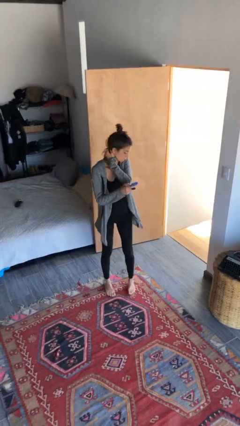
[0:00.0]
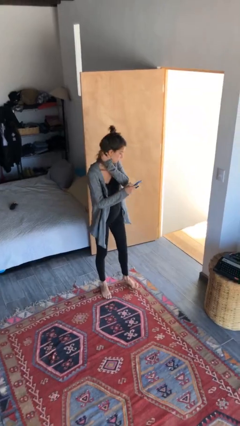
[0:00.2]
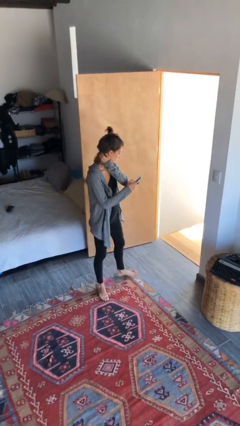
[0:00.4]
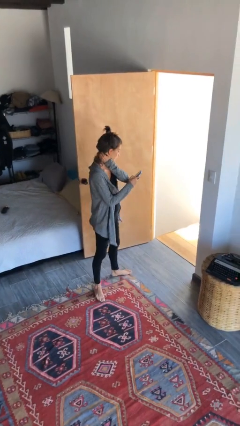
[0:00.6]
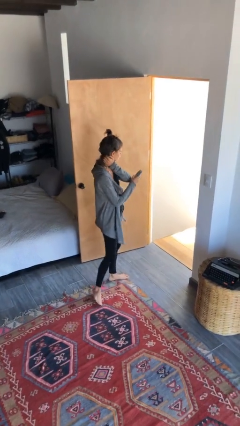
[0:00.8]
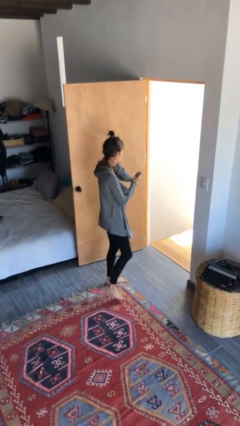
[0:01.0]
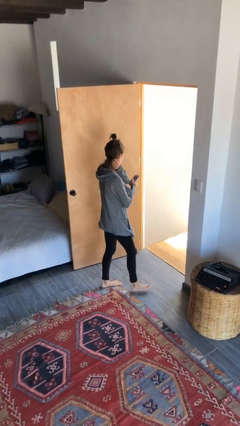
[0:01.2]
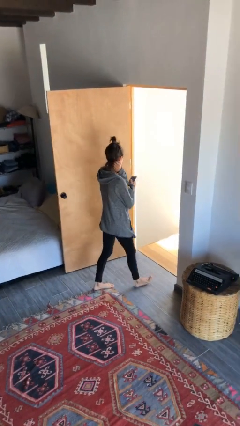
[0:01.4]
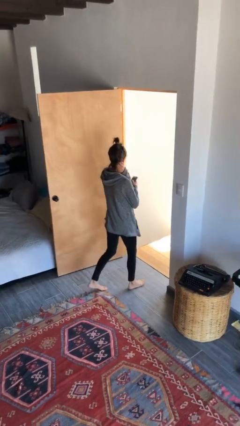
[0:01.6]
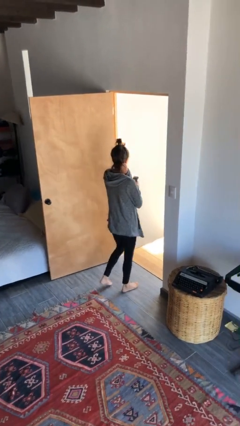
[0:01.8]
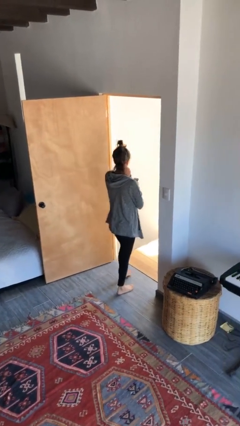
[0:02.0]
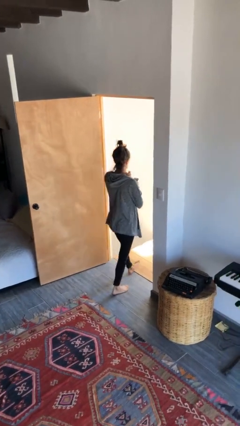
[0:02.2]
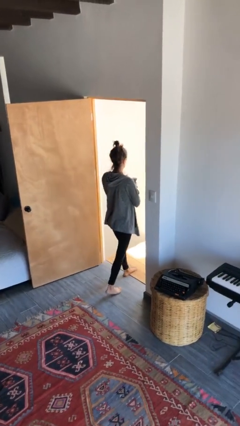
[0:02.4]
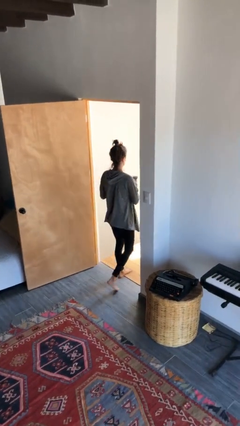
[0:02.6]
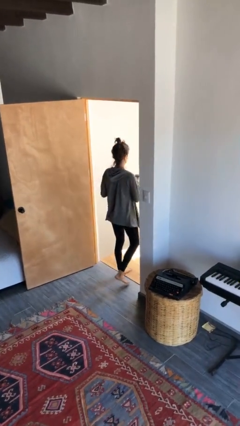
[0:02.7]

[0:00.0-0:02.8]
person exits scene through structure

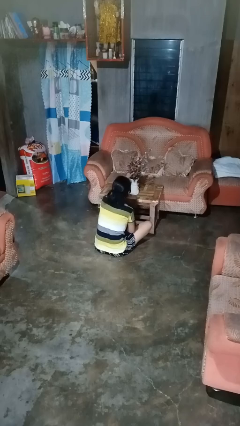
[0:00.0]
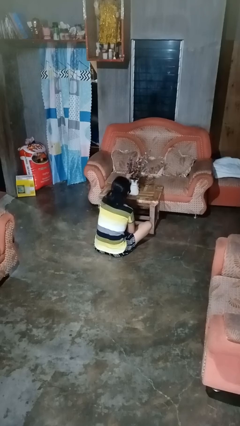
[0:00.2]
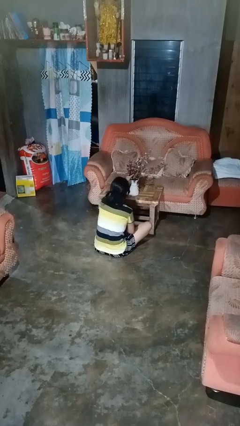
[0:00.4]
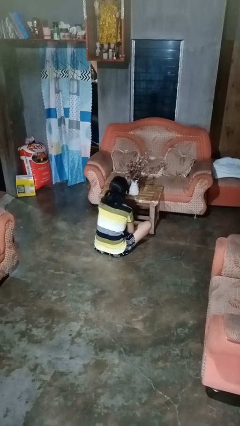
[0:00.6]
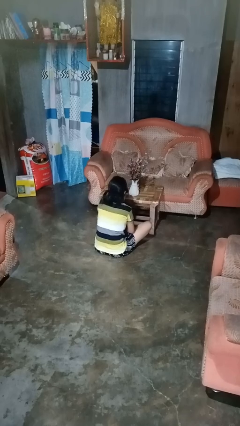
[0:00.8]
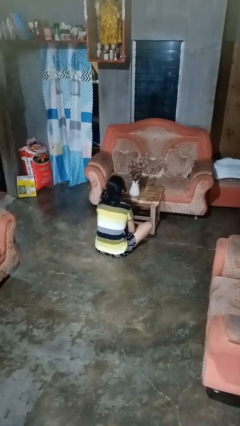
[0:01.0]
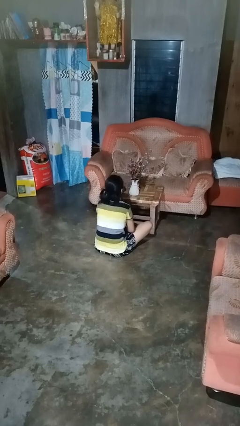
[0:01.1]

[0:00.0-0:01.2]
person arranges flowers in vase

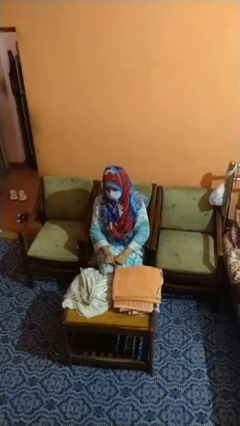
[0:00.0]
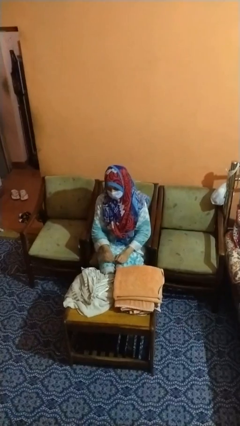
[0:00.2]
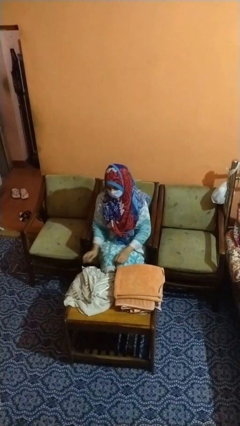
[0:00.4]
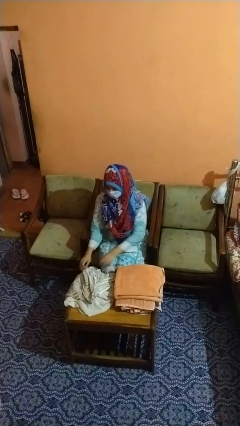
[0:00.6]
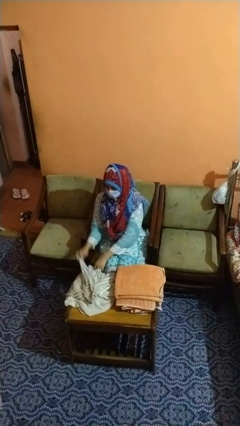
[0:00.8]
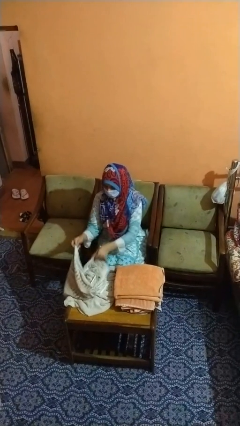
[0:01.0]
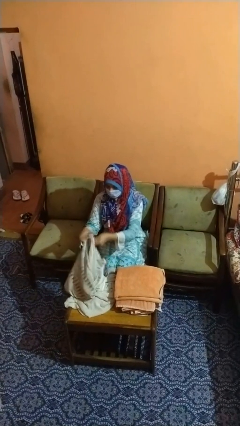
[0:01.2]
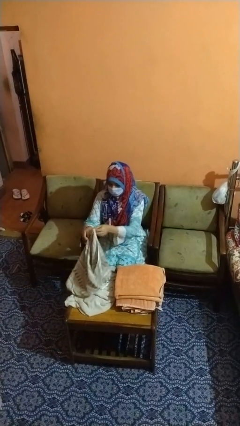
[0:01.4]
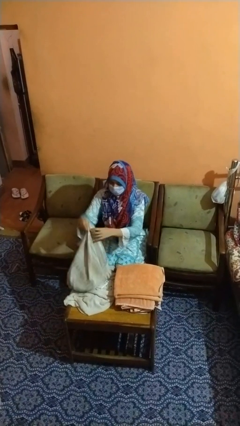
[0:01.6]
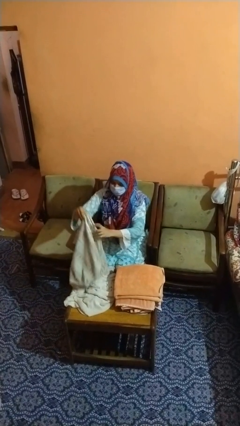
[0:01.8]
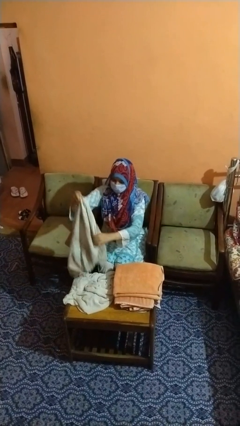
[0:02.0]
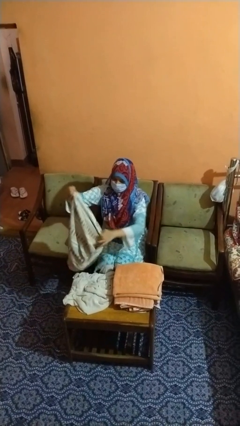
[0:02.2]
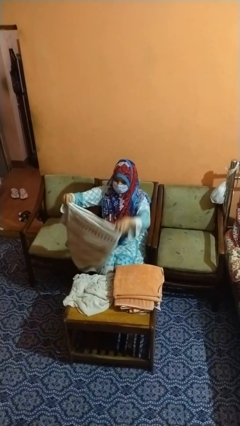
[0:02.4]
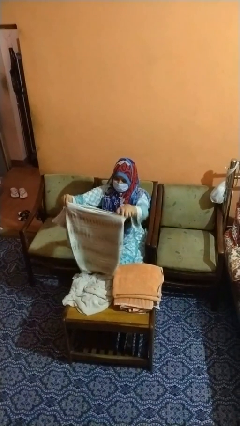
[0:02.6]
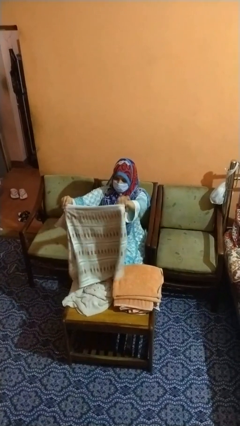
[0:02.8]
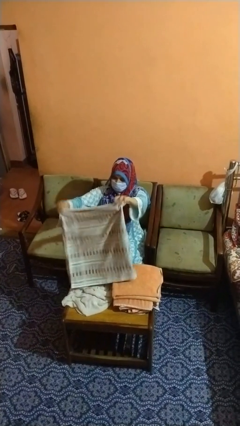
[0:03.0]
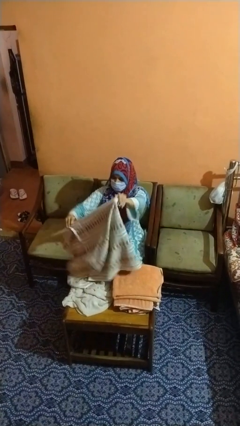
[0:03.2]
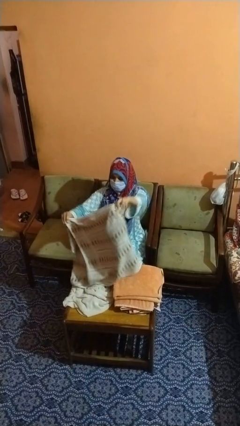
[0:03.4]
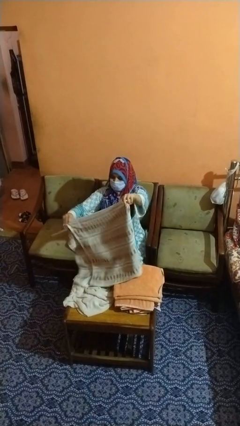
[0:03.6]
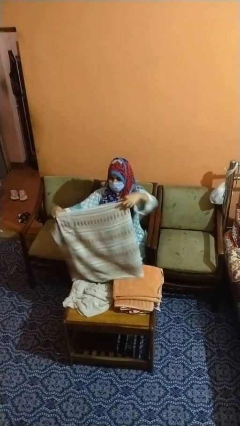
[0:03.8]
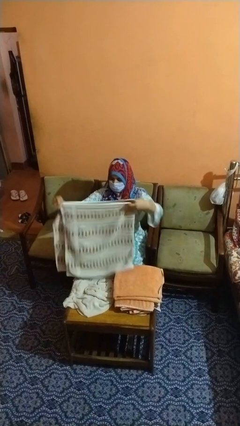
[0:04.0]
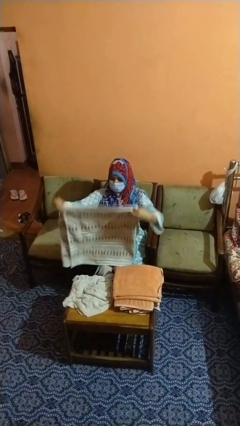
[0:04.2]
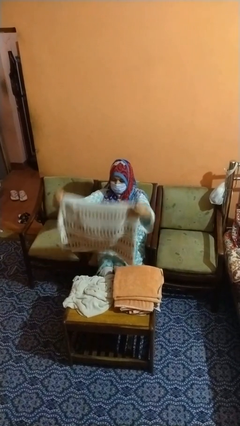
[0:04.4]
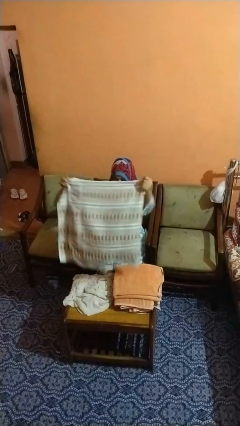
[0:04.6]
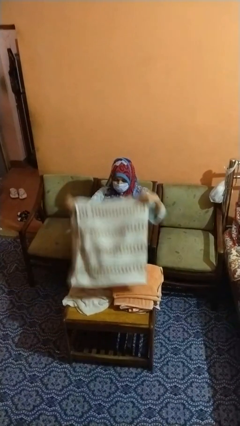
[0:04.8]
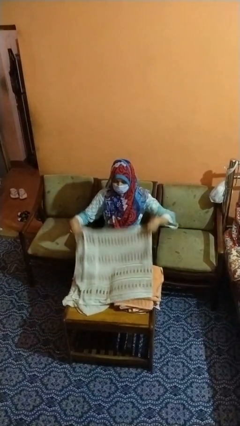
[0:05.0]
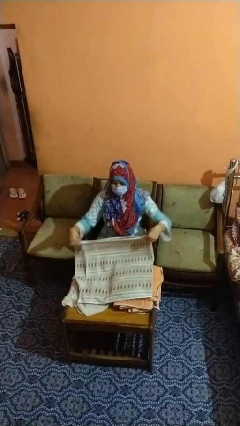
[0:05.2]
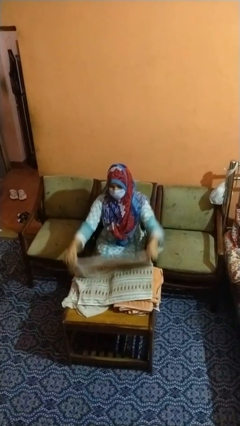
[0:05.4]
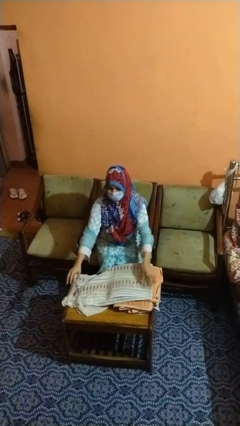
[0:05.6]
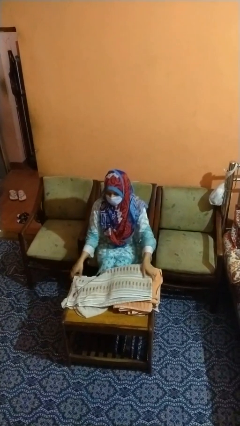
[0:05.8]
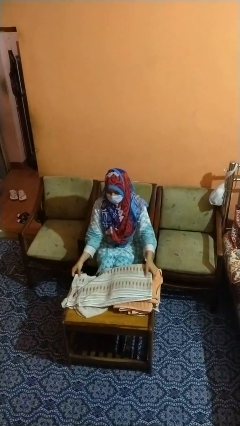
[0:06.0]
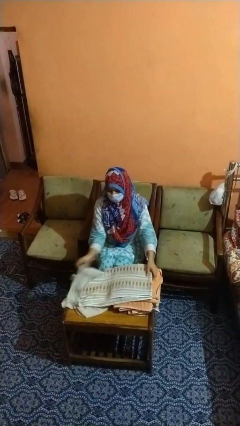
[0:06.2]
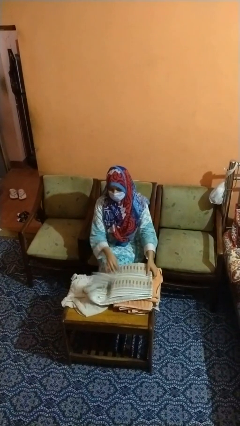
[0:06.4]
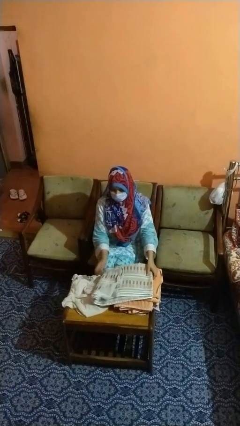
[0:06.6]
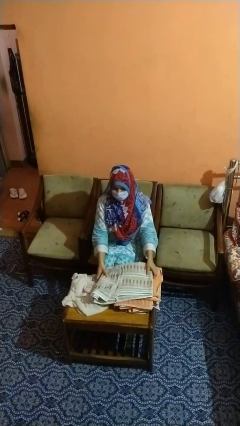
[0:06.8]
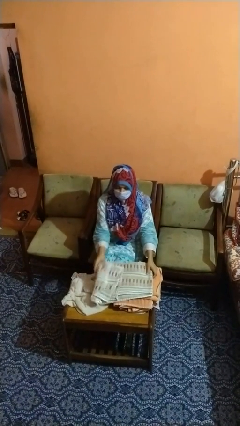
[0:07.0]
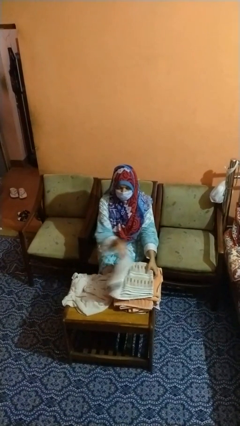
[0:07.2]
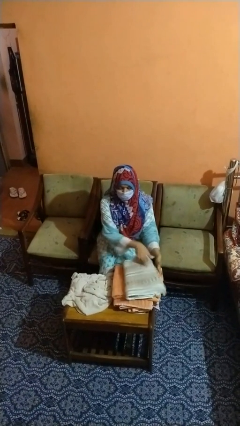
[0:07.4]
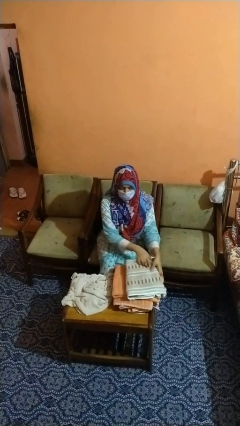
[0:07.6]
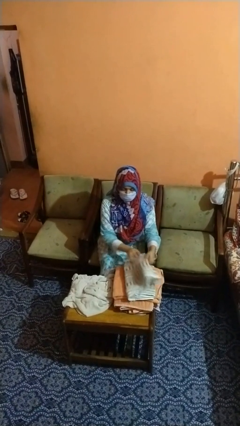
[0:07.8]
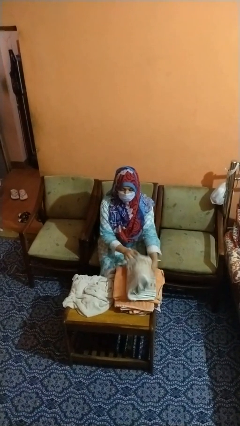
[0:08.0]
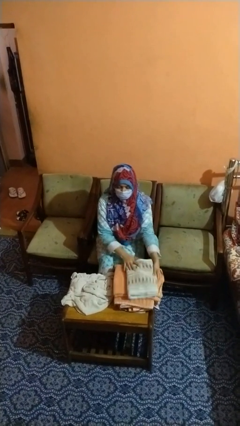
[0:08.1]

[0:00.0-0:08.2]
person folds towel

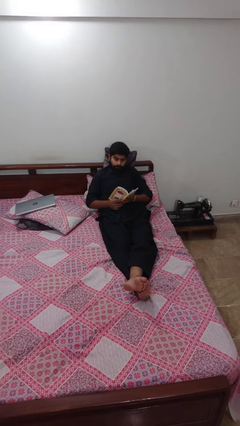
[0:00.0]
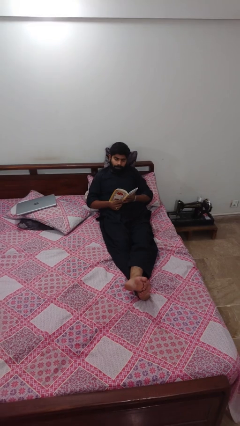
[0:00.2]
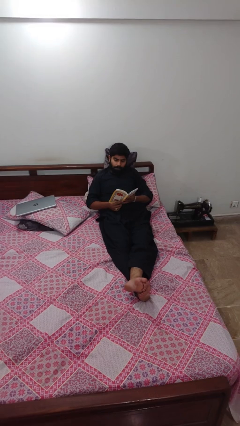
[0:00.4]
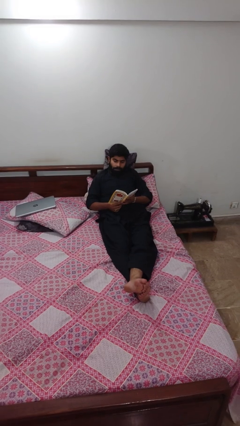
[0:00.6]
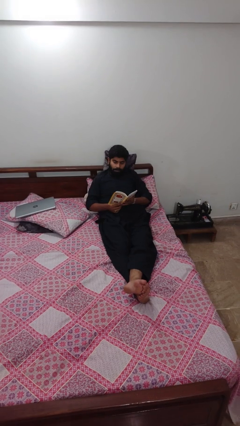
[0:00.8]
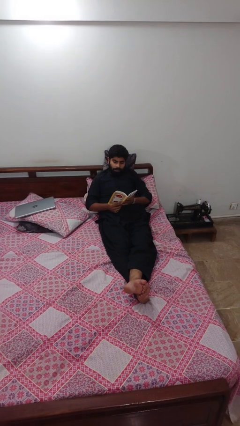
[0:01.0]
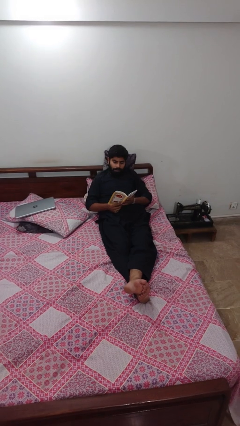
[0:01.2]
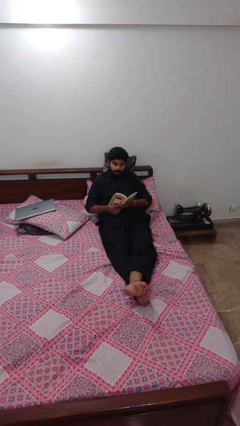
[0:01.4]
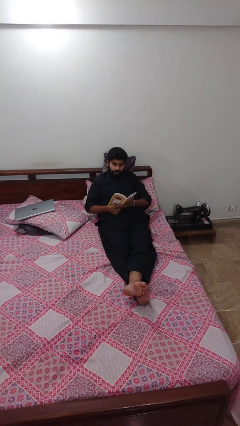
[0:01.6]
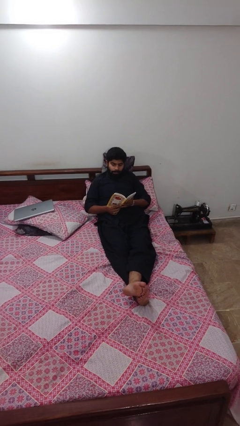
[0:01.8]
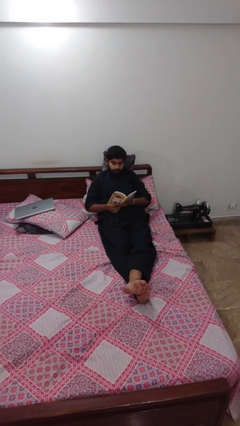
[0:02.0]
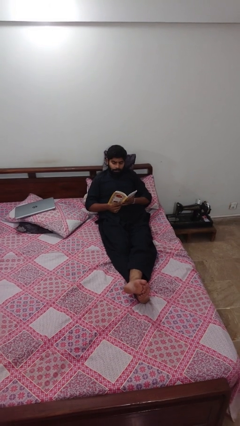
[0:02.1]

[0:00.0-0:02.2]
person reads book

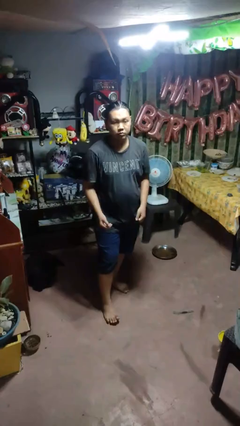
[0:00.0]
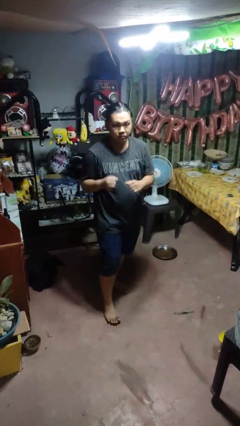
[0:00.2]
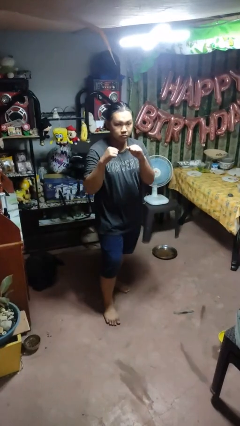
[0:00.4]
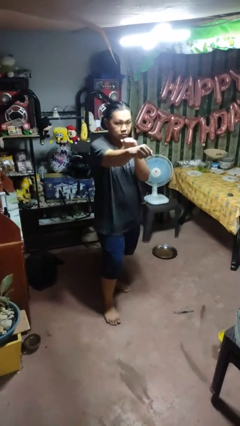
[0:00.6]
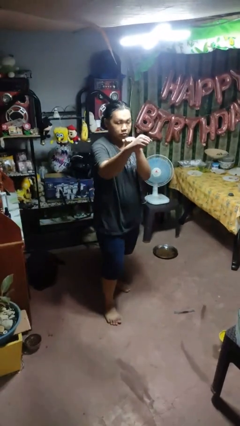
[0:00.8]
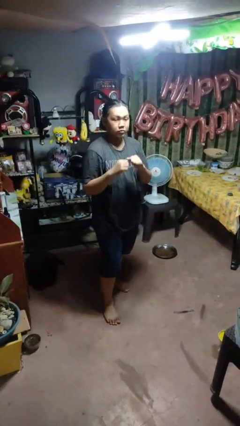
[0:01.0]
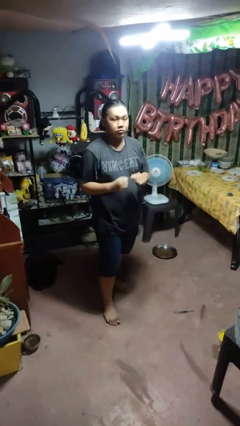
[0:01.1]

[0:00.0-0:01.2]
person punches

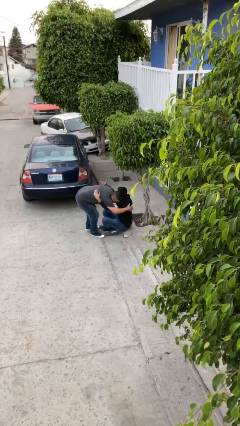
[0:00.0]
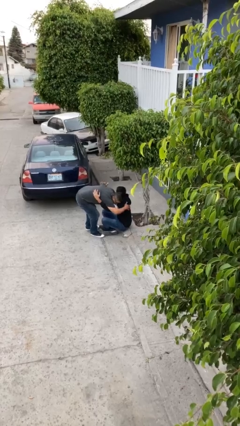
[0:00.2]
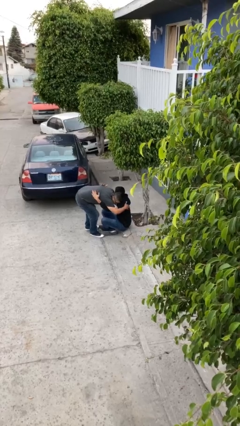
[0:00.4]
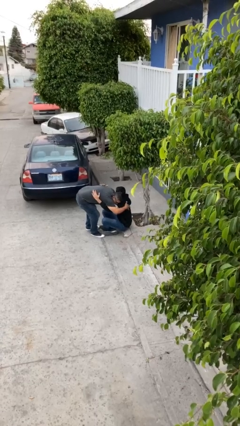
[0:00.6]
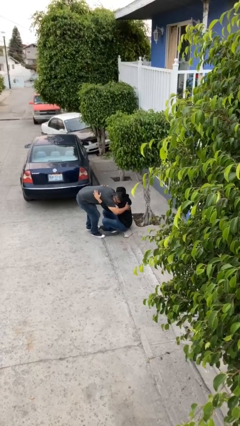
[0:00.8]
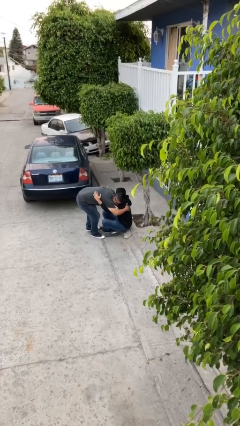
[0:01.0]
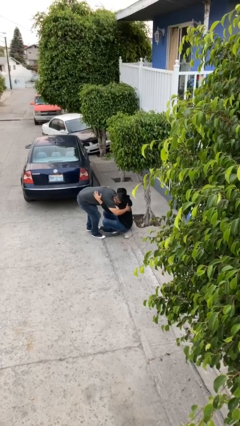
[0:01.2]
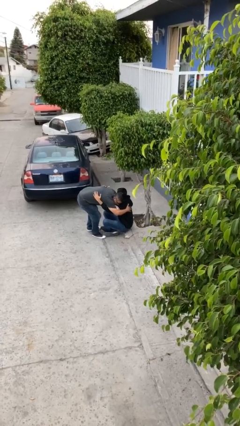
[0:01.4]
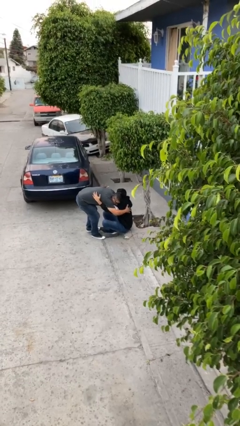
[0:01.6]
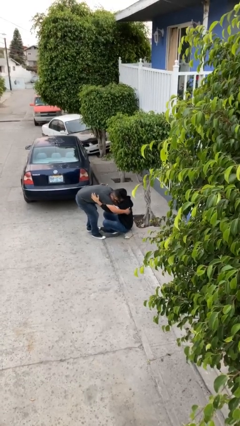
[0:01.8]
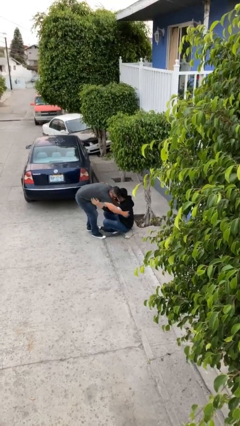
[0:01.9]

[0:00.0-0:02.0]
person embraces person
